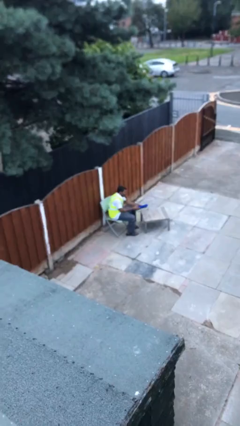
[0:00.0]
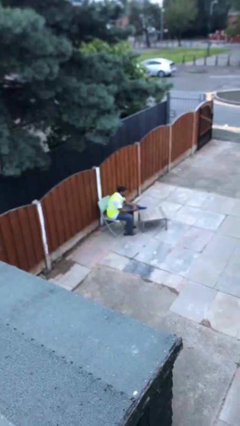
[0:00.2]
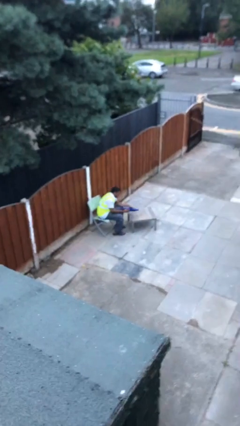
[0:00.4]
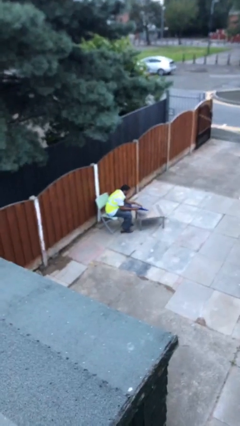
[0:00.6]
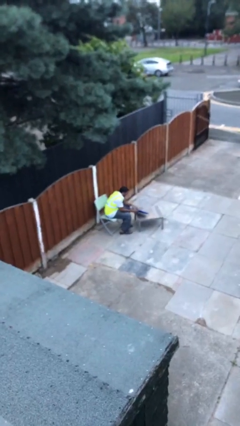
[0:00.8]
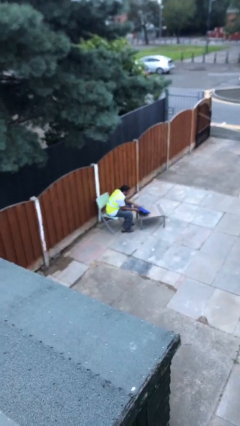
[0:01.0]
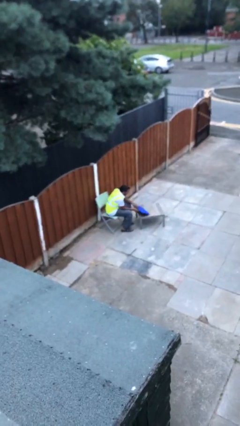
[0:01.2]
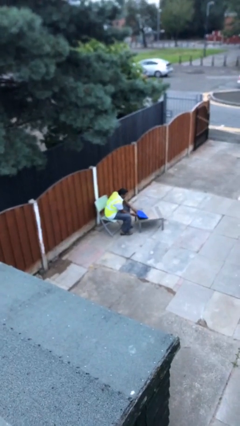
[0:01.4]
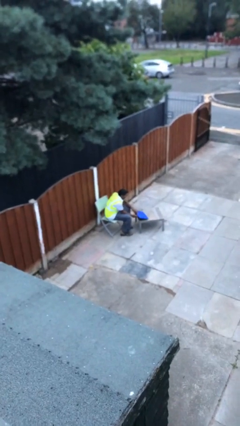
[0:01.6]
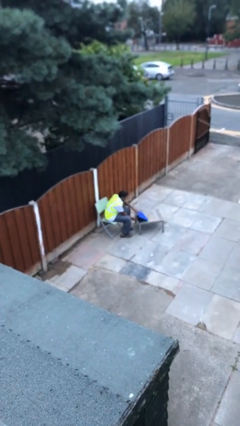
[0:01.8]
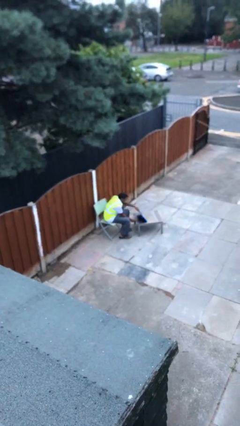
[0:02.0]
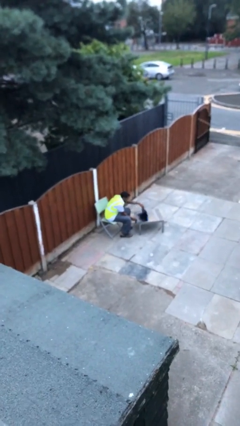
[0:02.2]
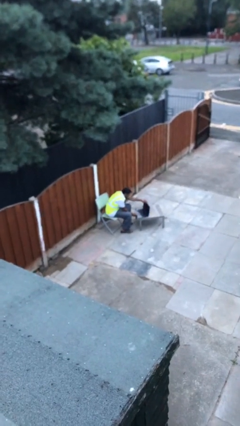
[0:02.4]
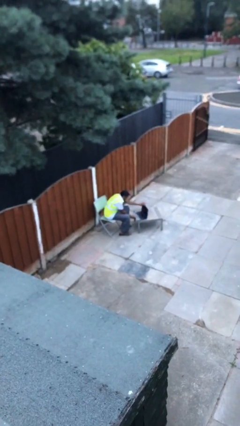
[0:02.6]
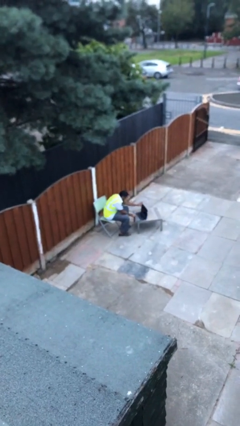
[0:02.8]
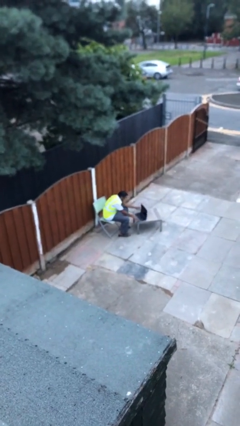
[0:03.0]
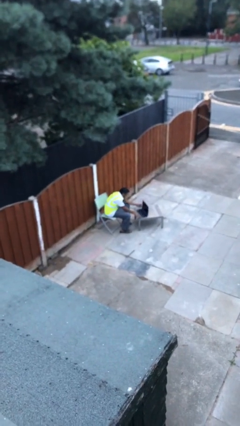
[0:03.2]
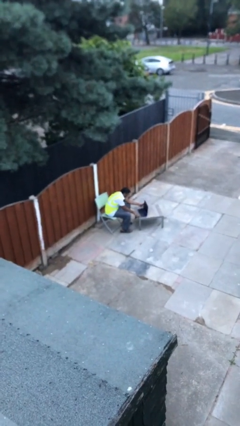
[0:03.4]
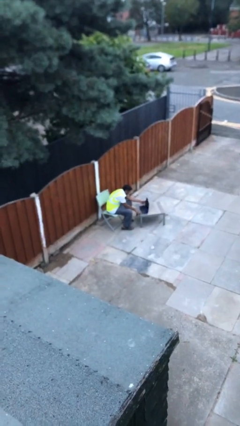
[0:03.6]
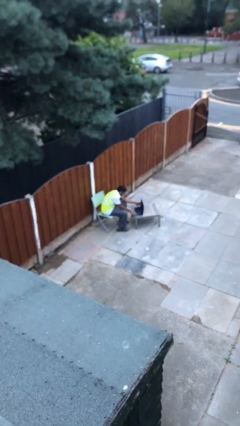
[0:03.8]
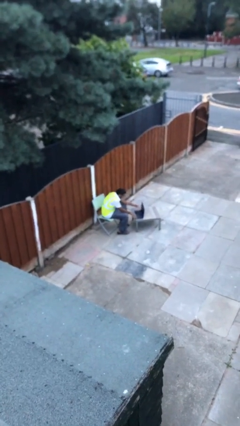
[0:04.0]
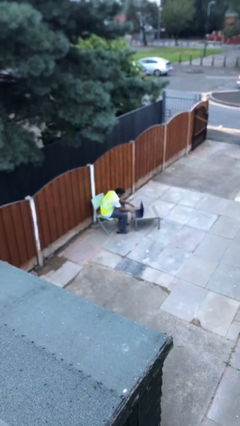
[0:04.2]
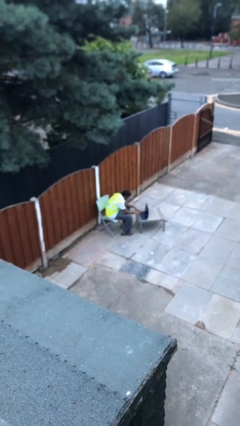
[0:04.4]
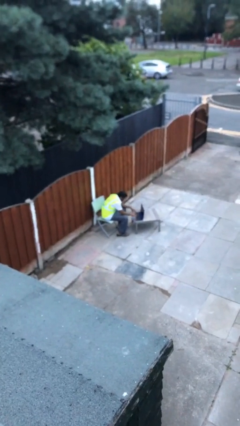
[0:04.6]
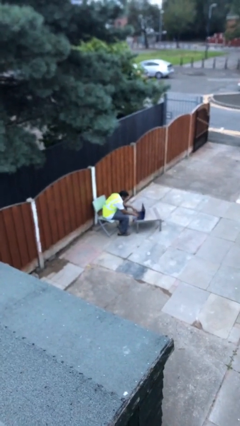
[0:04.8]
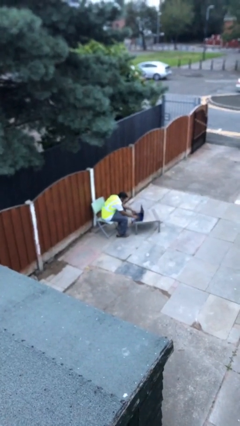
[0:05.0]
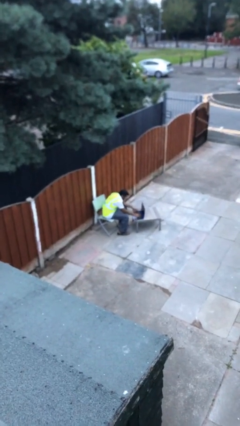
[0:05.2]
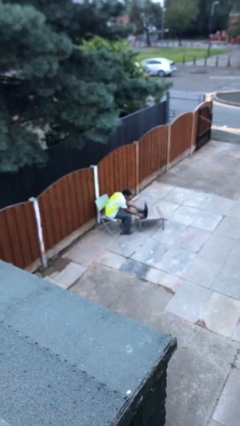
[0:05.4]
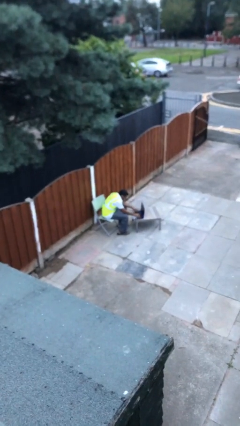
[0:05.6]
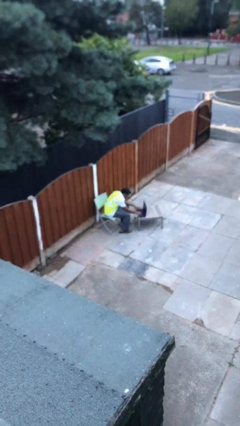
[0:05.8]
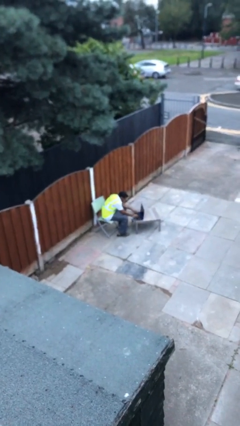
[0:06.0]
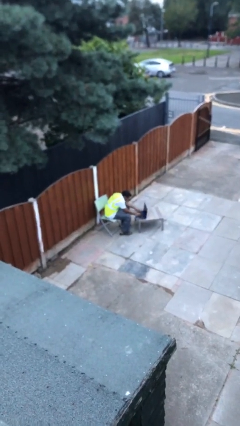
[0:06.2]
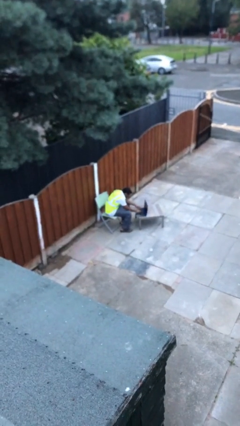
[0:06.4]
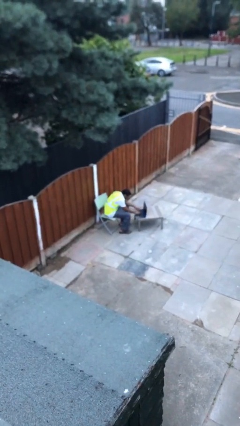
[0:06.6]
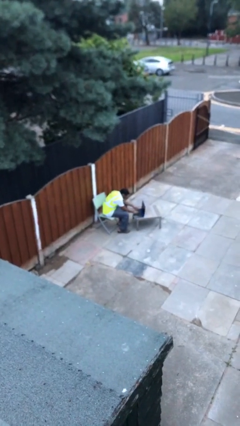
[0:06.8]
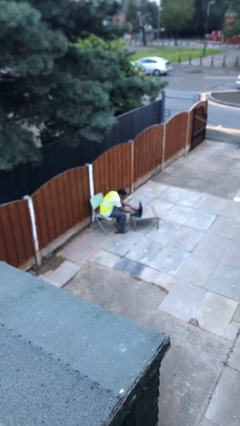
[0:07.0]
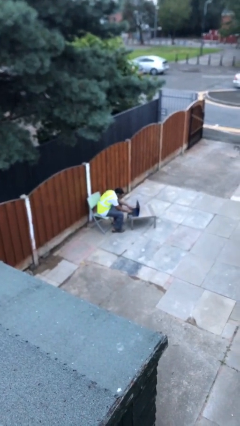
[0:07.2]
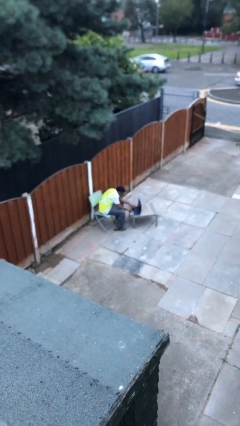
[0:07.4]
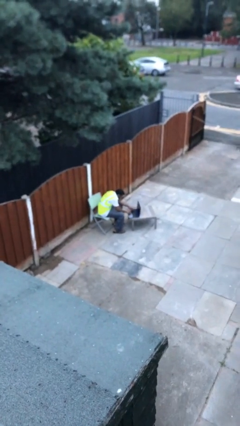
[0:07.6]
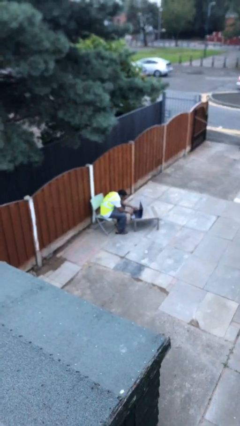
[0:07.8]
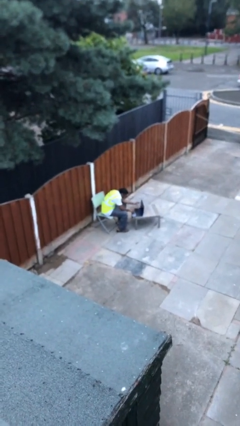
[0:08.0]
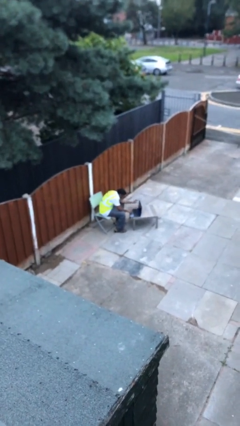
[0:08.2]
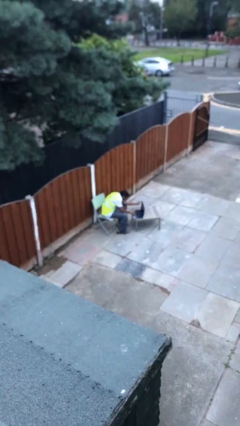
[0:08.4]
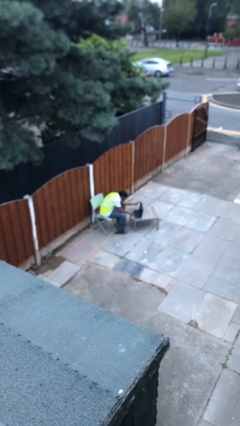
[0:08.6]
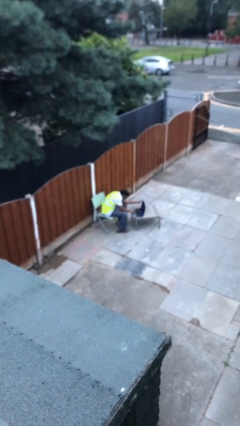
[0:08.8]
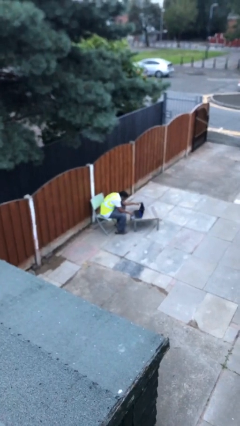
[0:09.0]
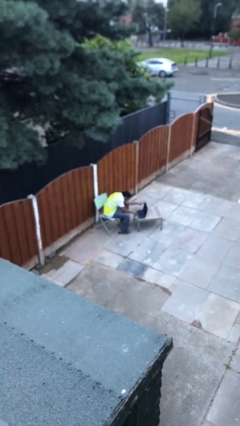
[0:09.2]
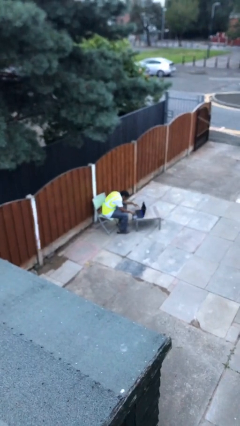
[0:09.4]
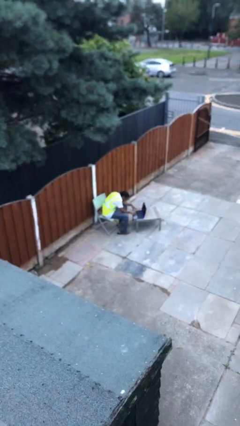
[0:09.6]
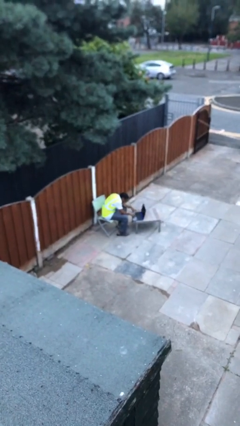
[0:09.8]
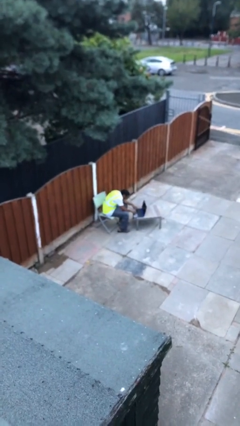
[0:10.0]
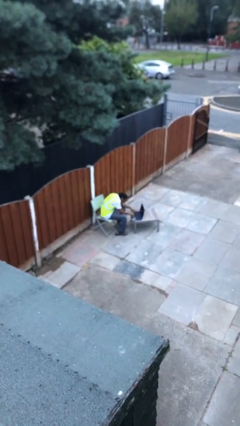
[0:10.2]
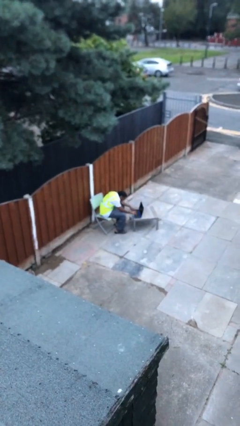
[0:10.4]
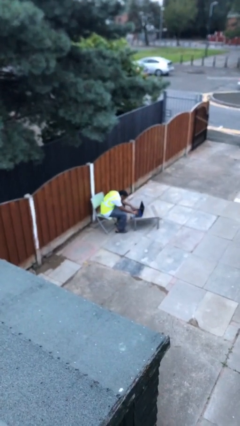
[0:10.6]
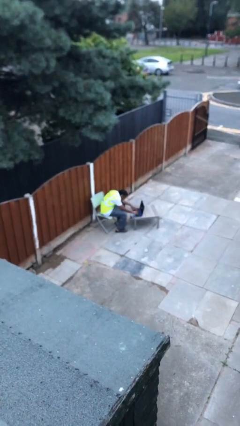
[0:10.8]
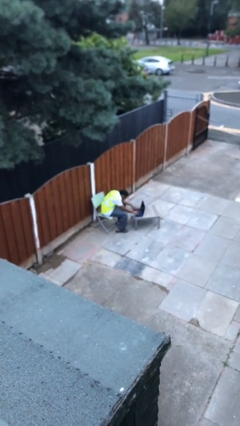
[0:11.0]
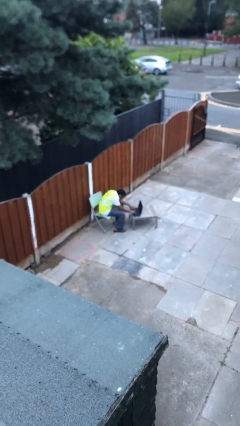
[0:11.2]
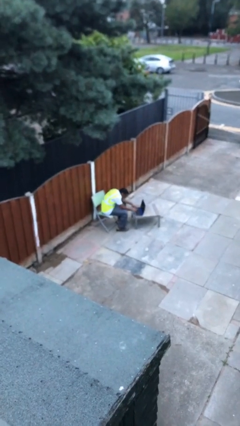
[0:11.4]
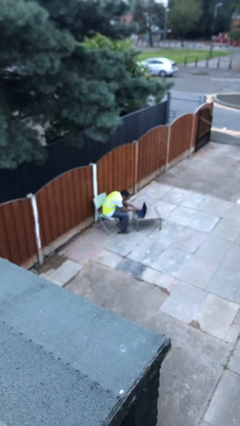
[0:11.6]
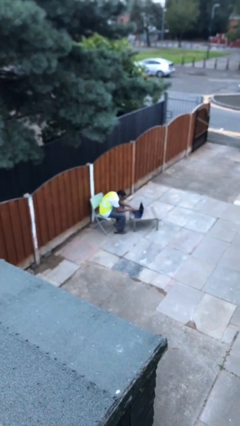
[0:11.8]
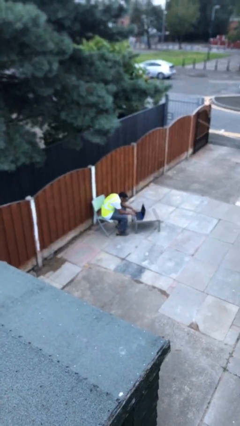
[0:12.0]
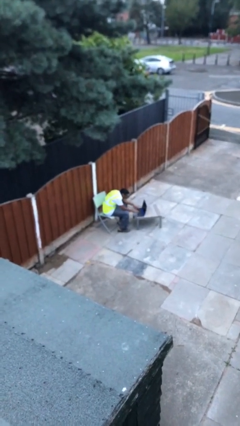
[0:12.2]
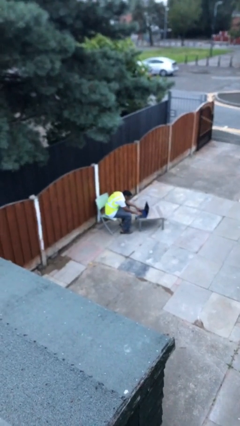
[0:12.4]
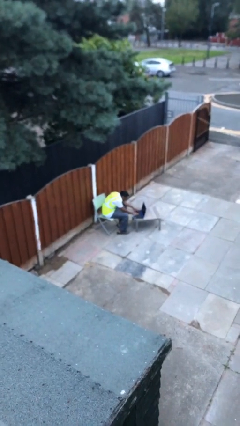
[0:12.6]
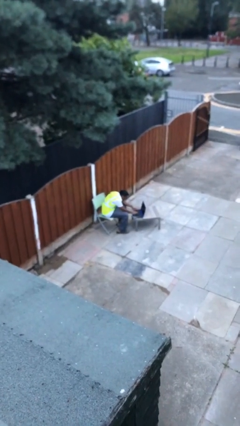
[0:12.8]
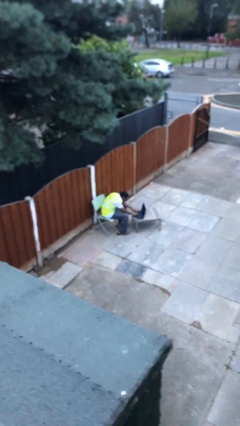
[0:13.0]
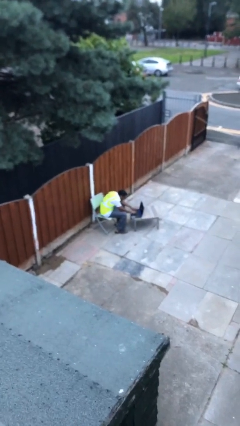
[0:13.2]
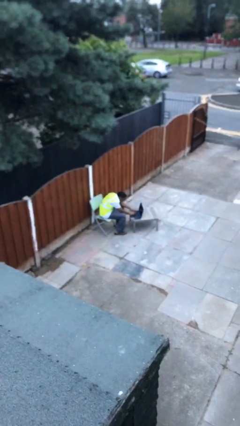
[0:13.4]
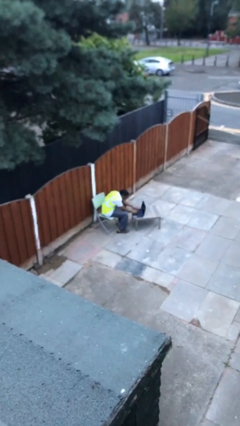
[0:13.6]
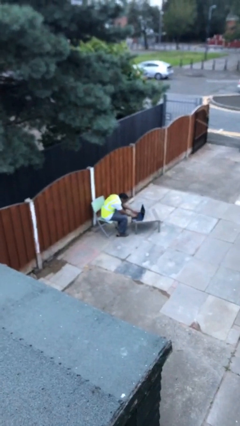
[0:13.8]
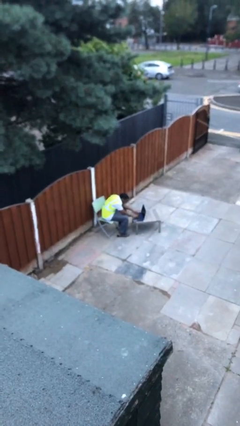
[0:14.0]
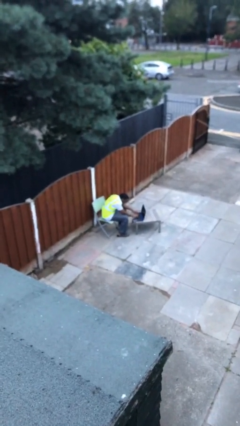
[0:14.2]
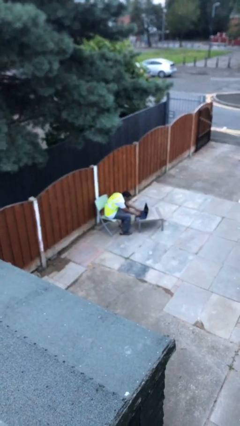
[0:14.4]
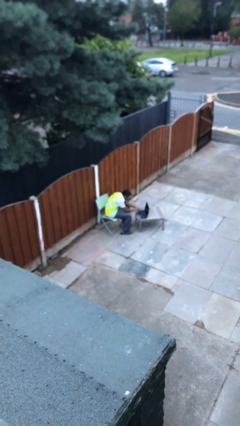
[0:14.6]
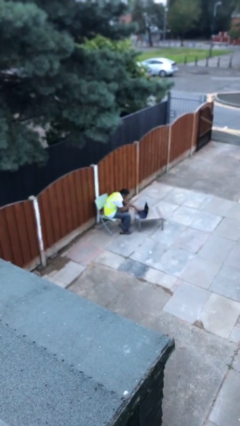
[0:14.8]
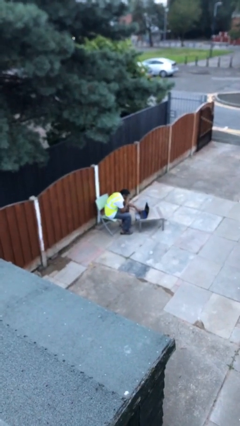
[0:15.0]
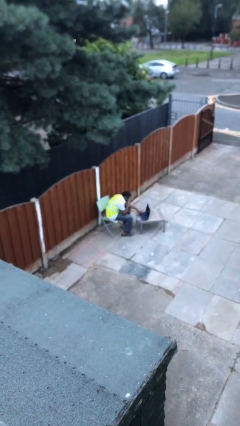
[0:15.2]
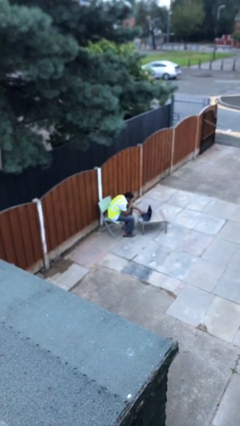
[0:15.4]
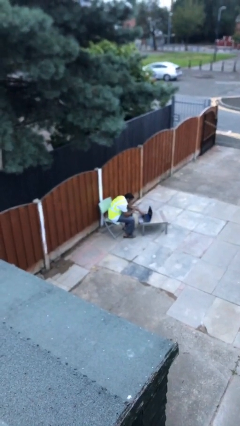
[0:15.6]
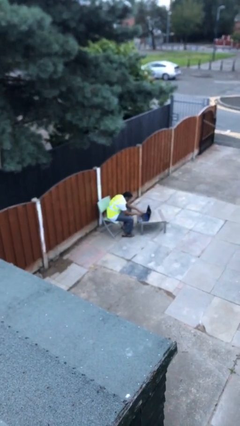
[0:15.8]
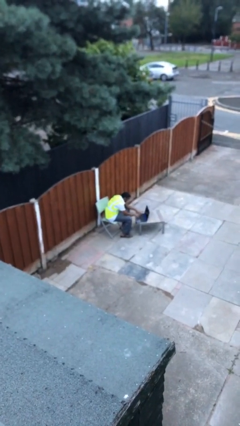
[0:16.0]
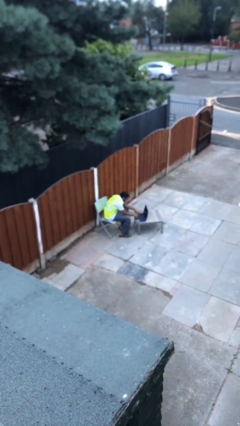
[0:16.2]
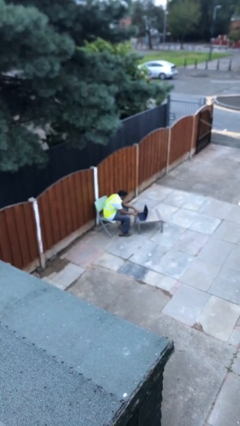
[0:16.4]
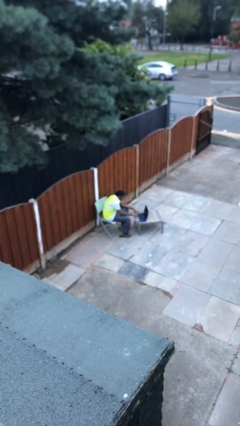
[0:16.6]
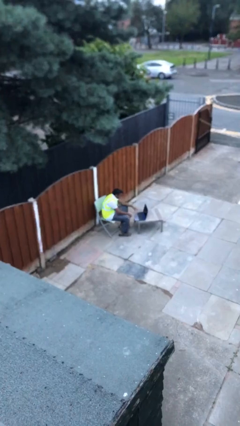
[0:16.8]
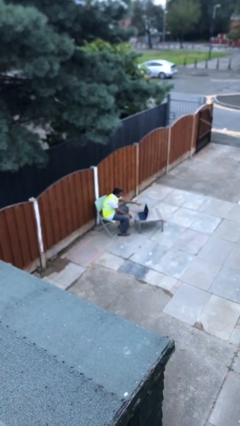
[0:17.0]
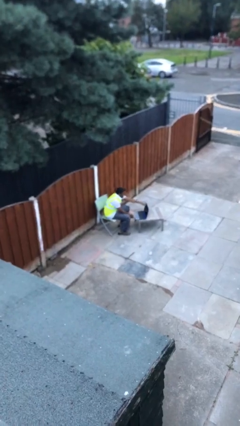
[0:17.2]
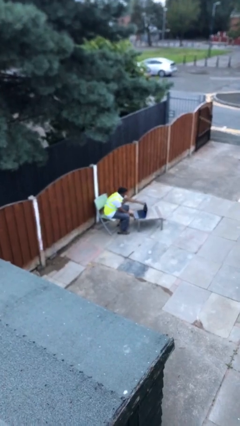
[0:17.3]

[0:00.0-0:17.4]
person interacts with laptop

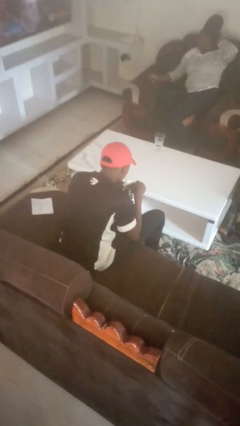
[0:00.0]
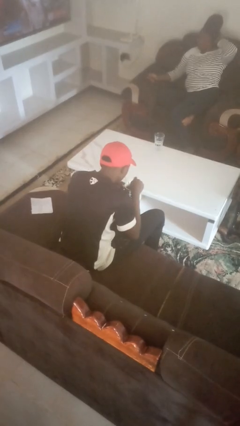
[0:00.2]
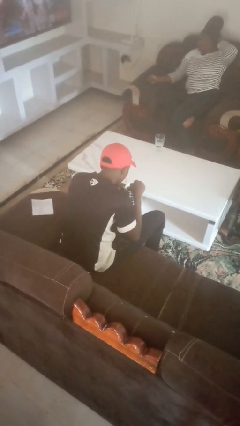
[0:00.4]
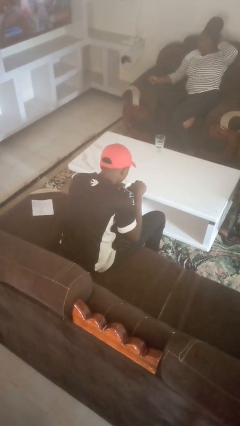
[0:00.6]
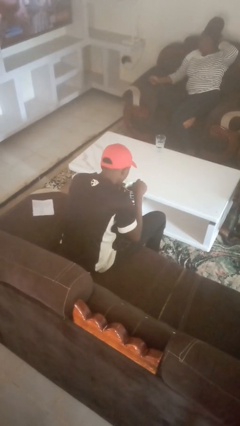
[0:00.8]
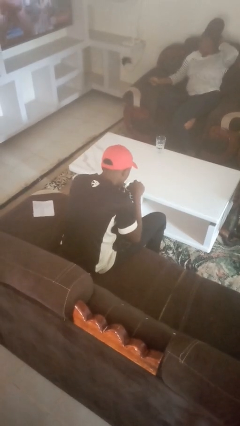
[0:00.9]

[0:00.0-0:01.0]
person stirs mug
